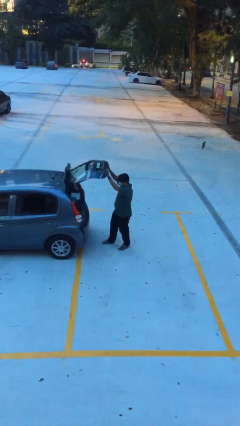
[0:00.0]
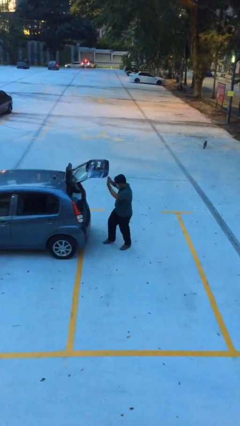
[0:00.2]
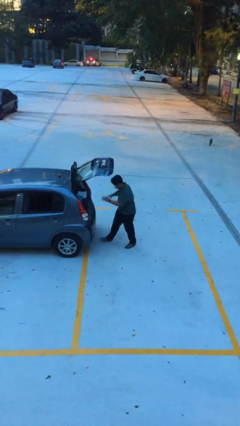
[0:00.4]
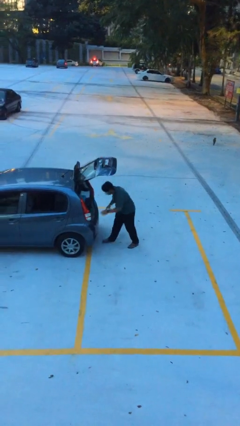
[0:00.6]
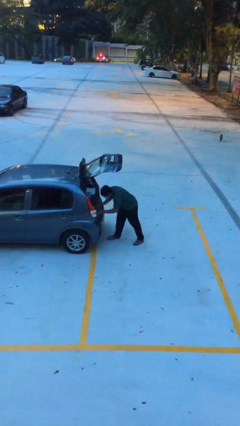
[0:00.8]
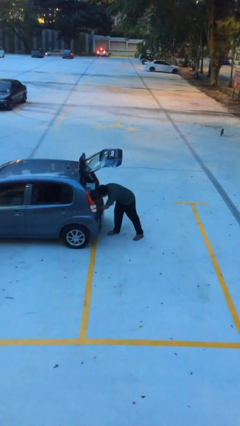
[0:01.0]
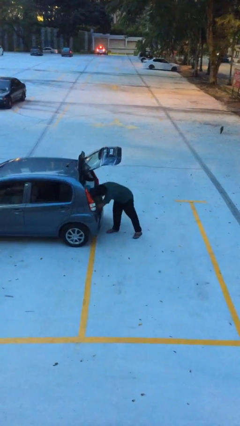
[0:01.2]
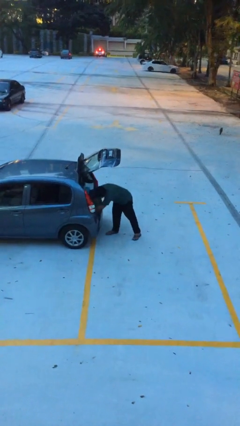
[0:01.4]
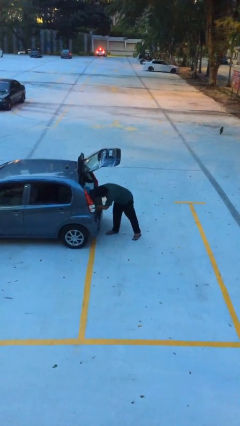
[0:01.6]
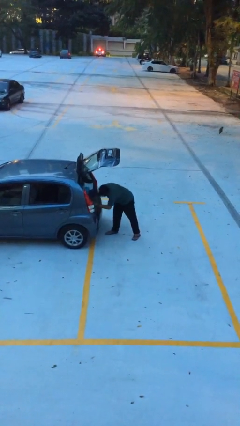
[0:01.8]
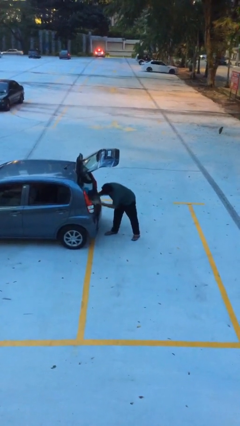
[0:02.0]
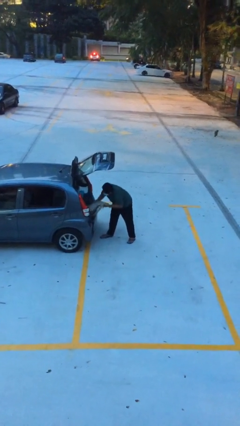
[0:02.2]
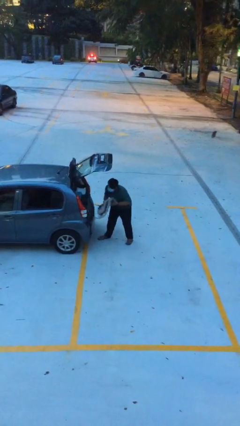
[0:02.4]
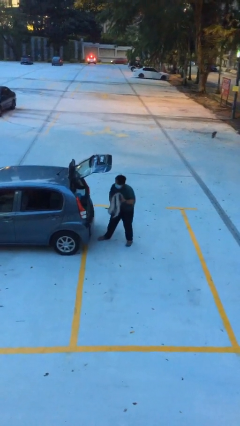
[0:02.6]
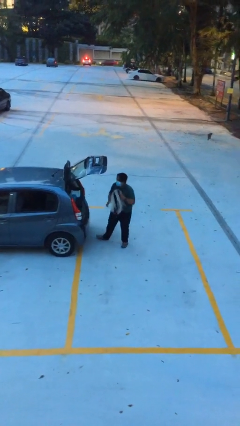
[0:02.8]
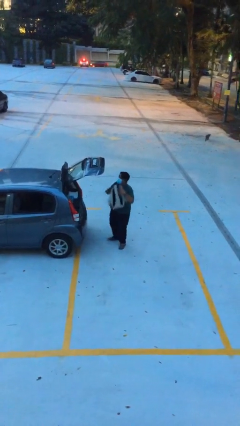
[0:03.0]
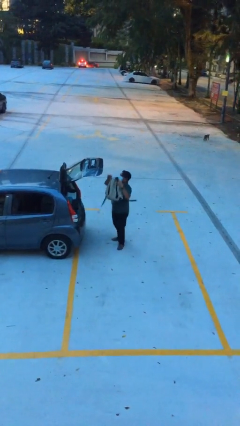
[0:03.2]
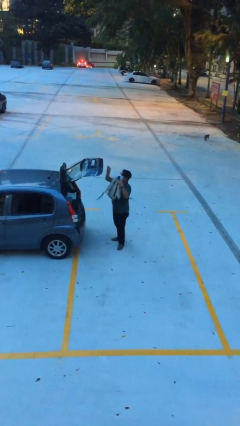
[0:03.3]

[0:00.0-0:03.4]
person unloads car

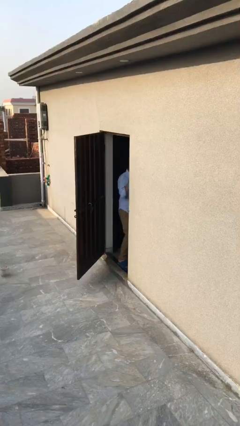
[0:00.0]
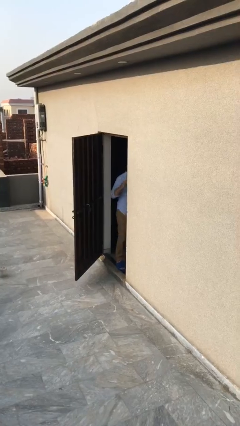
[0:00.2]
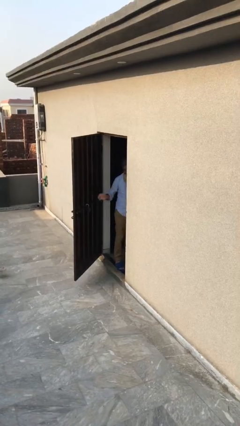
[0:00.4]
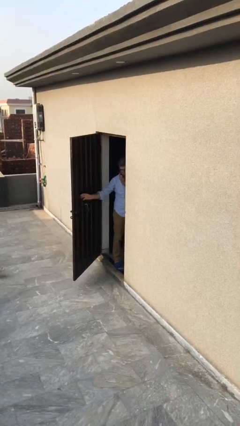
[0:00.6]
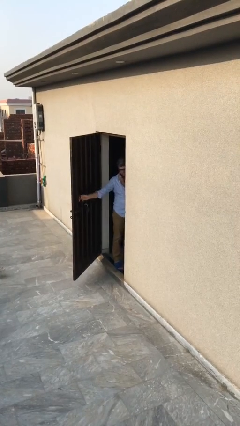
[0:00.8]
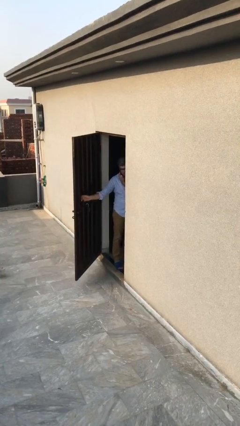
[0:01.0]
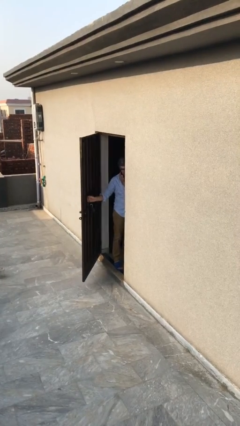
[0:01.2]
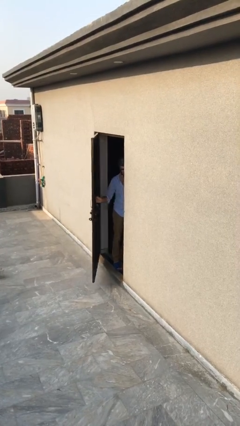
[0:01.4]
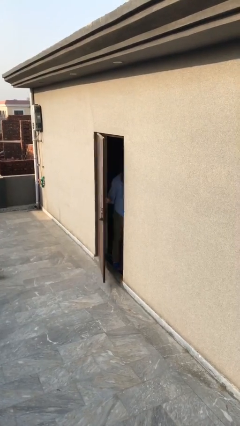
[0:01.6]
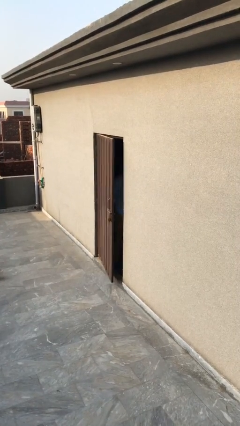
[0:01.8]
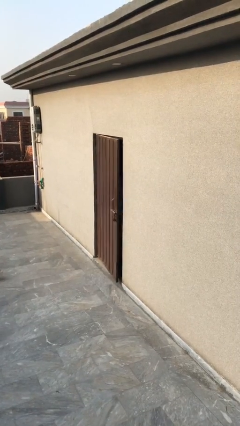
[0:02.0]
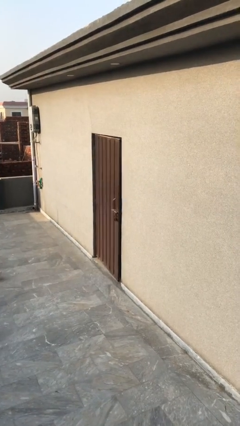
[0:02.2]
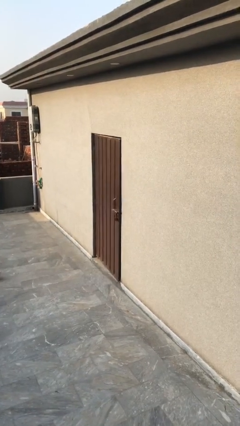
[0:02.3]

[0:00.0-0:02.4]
person closes facility door

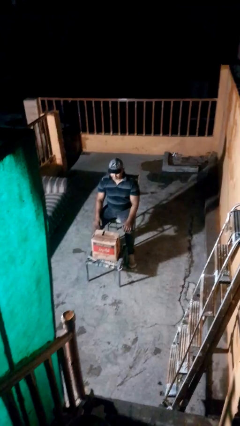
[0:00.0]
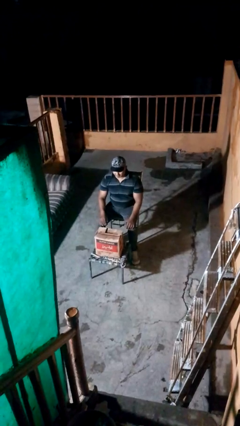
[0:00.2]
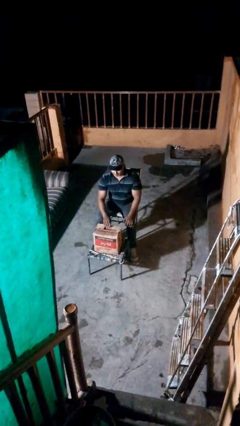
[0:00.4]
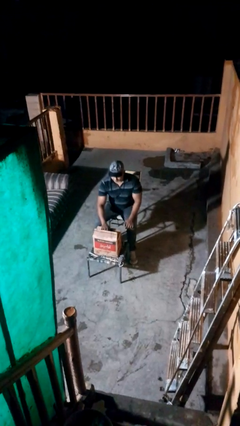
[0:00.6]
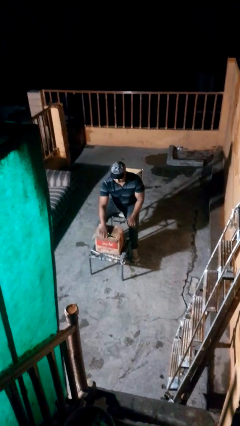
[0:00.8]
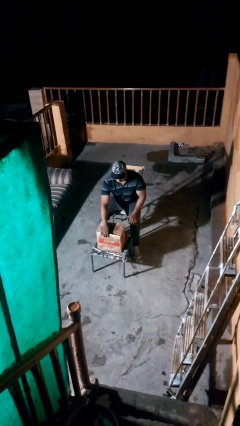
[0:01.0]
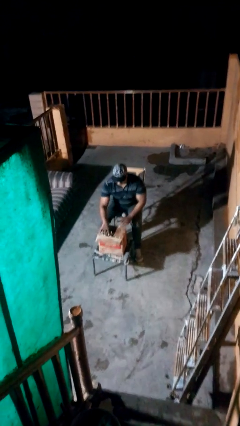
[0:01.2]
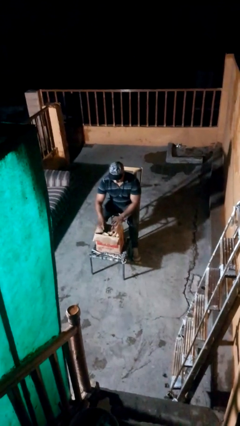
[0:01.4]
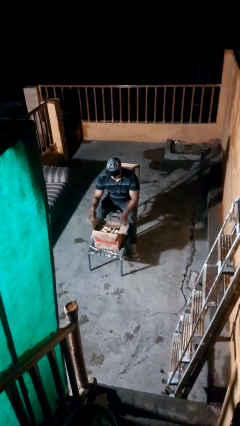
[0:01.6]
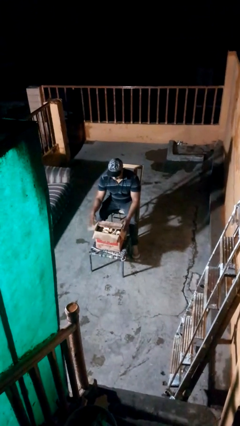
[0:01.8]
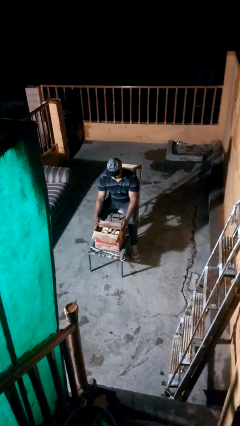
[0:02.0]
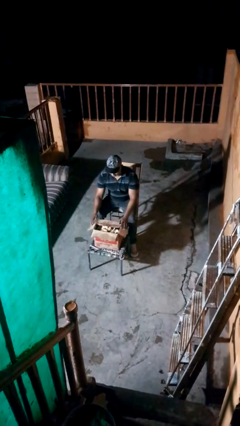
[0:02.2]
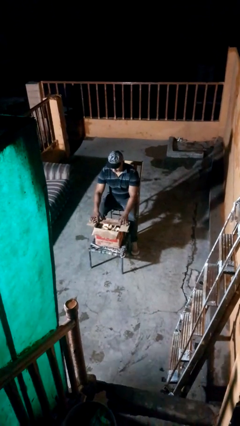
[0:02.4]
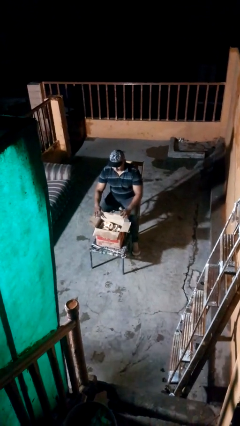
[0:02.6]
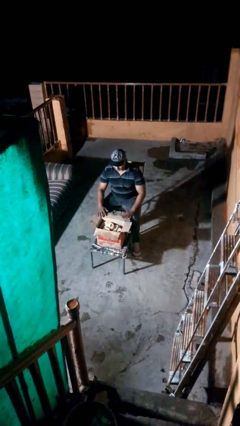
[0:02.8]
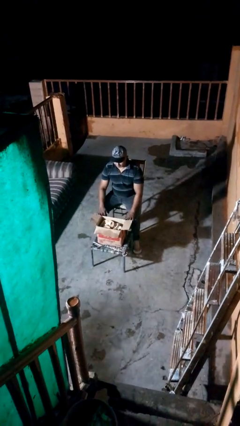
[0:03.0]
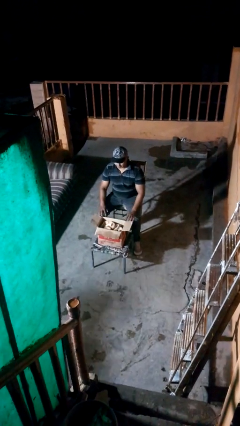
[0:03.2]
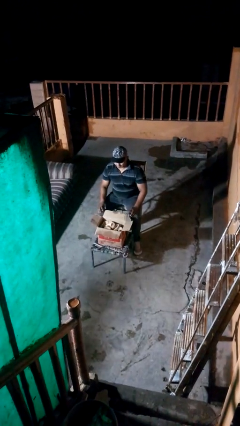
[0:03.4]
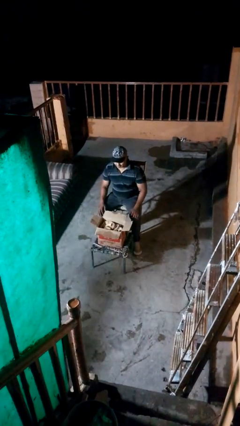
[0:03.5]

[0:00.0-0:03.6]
person opens box

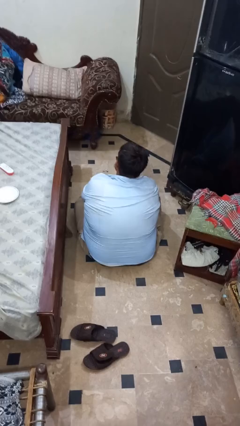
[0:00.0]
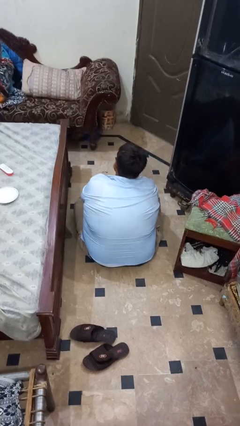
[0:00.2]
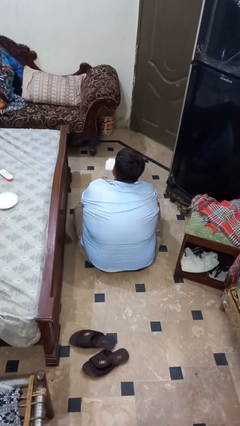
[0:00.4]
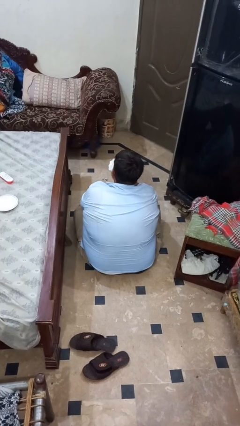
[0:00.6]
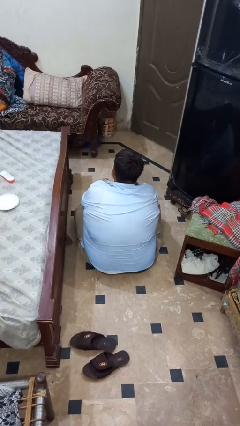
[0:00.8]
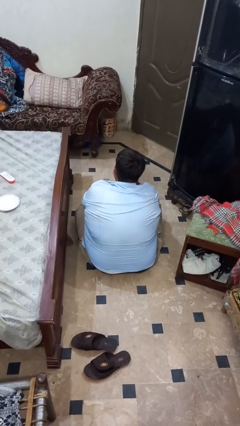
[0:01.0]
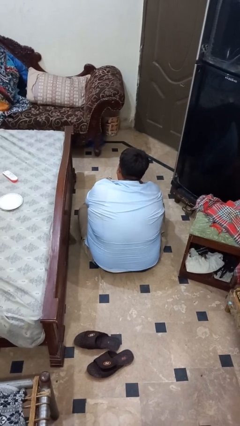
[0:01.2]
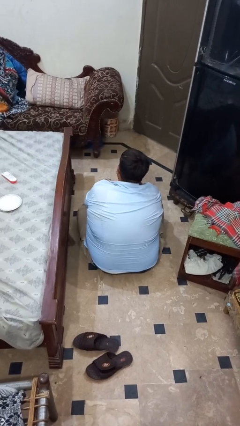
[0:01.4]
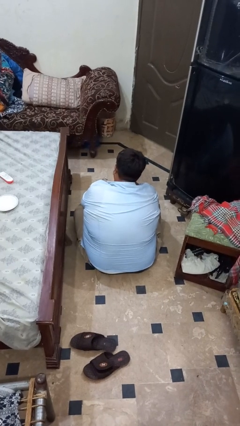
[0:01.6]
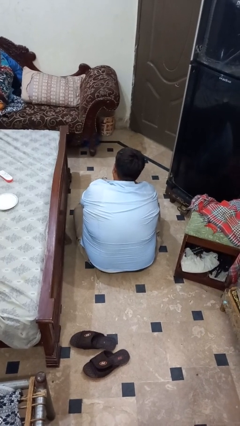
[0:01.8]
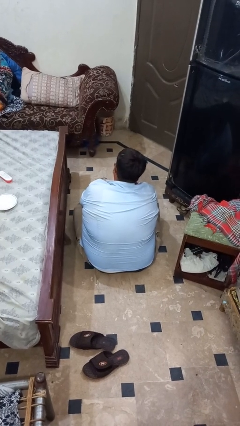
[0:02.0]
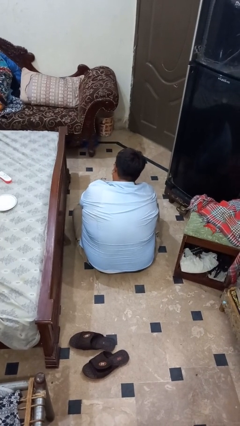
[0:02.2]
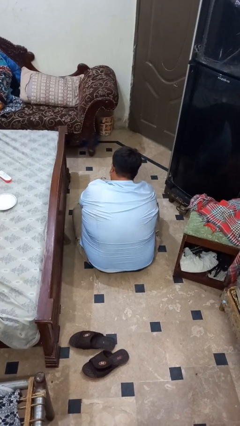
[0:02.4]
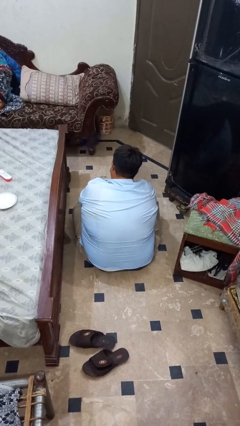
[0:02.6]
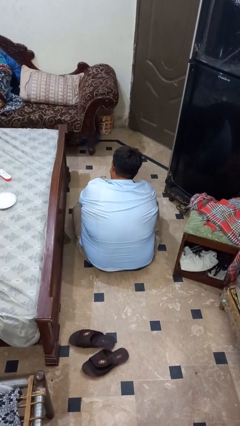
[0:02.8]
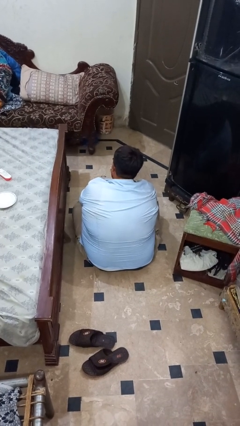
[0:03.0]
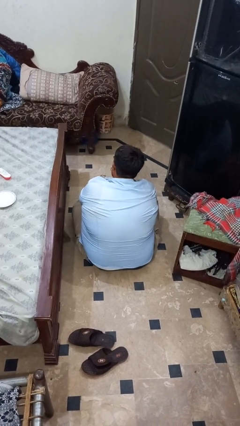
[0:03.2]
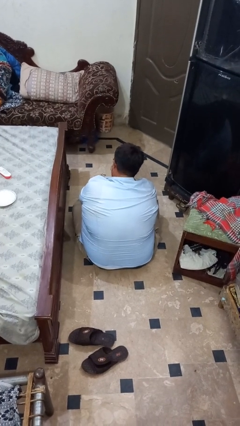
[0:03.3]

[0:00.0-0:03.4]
person blows nose

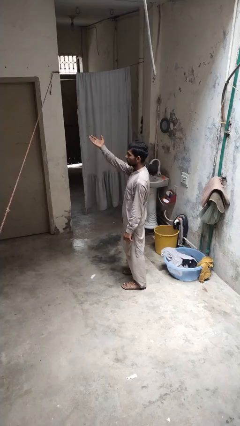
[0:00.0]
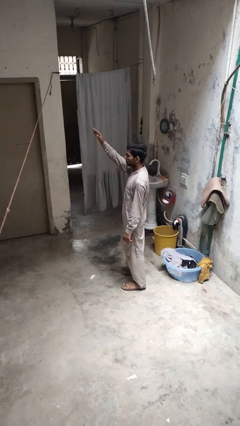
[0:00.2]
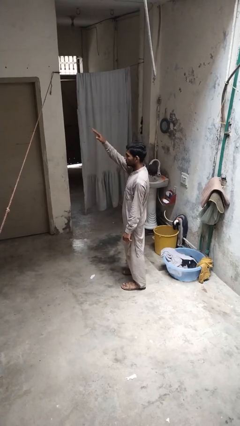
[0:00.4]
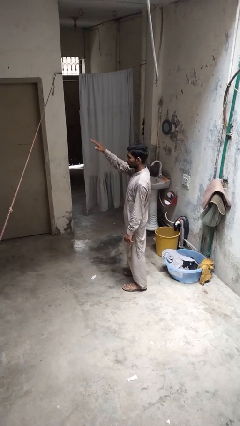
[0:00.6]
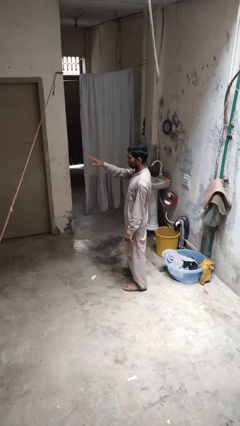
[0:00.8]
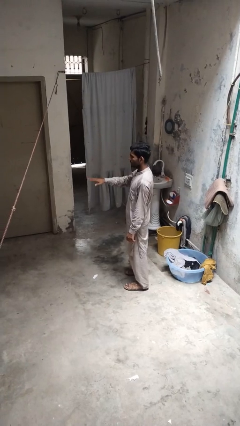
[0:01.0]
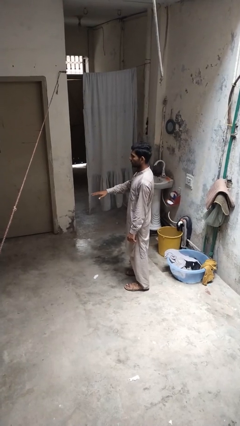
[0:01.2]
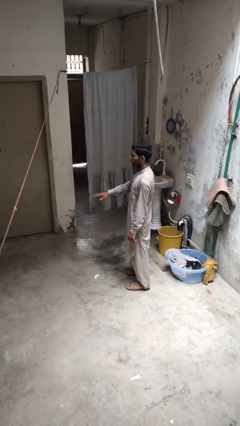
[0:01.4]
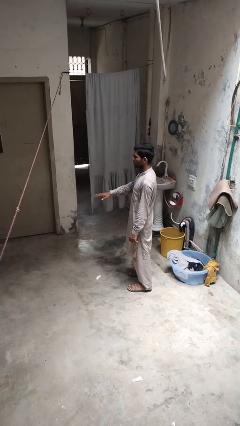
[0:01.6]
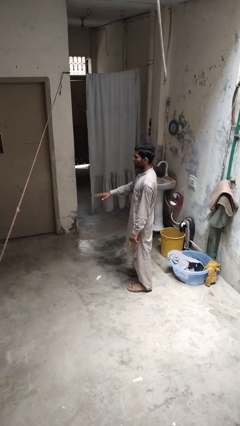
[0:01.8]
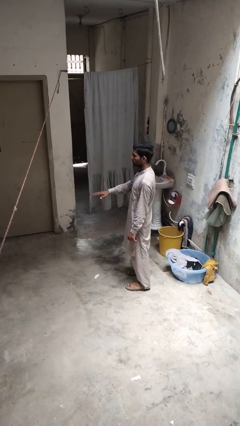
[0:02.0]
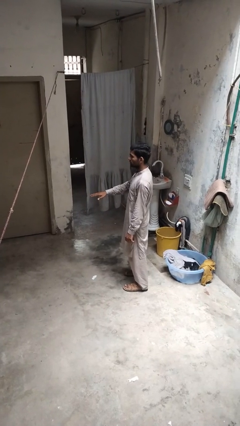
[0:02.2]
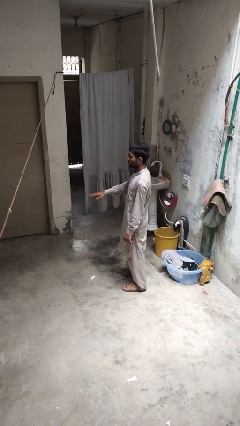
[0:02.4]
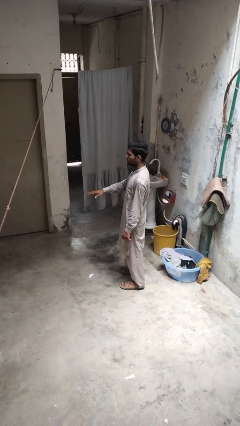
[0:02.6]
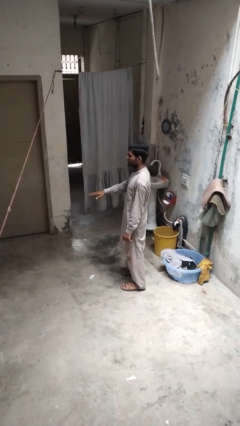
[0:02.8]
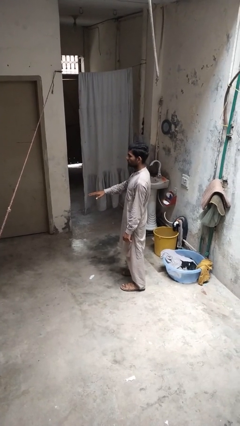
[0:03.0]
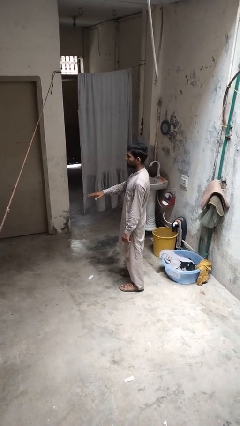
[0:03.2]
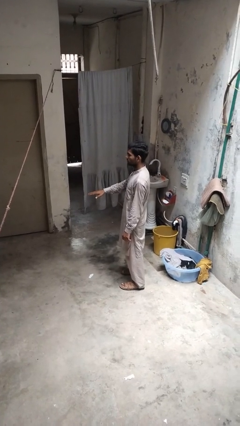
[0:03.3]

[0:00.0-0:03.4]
person gestures swipe down

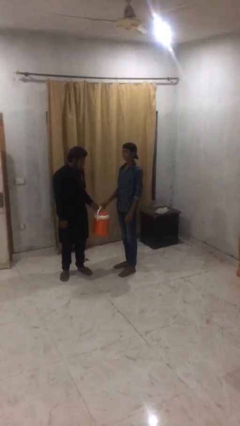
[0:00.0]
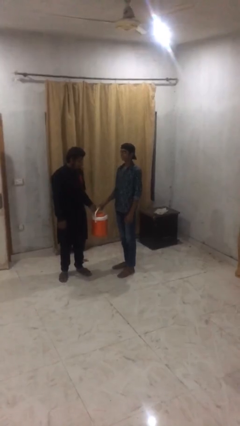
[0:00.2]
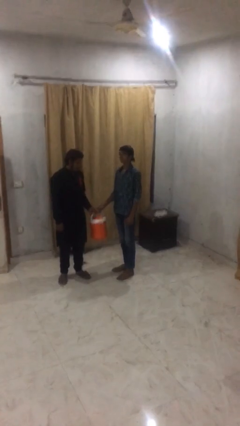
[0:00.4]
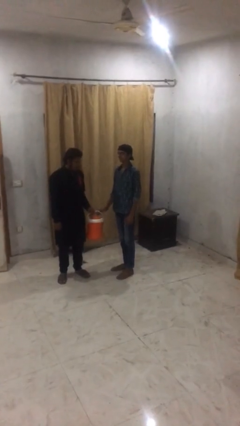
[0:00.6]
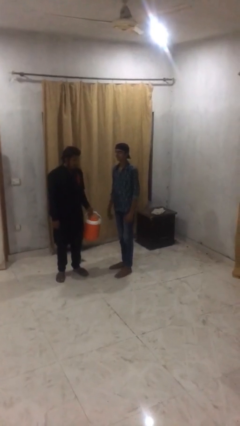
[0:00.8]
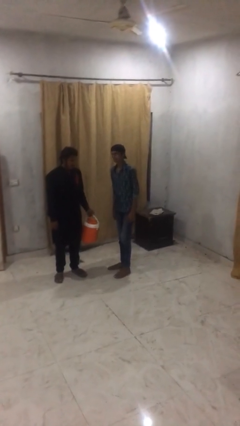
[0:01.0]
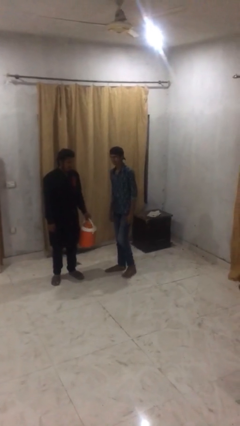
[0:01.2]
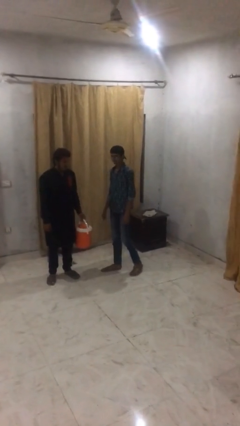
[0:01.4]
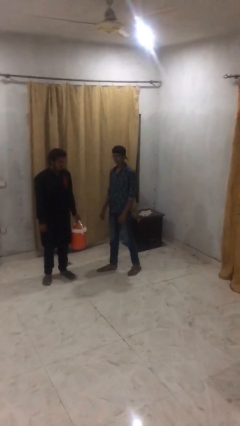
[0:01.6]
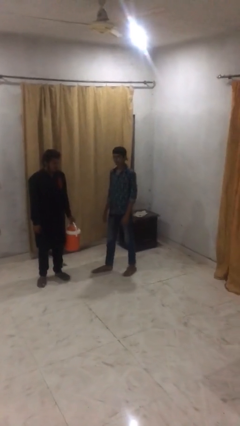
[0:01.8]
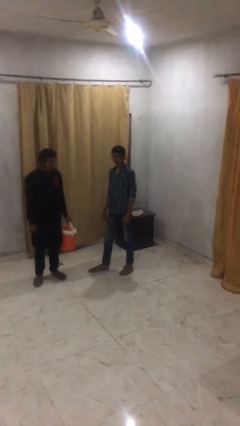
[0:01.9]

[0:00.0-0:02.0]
person transfers object to person
